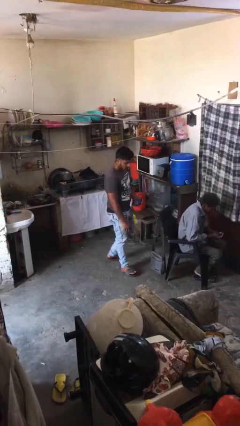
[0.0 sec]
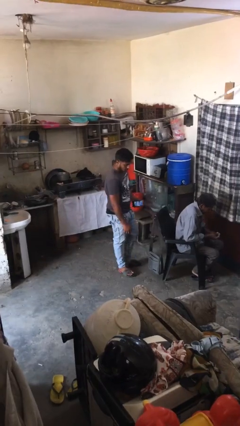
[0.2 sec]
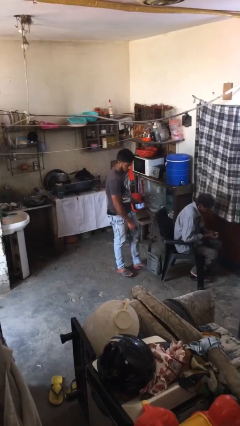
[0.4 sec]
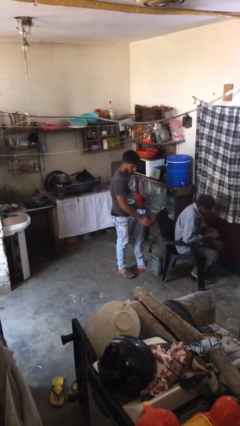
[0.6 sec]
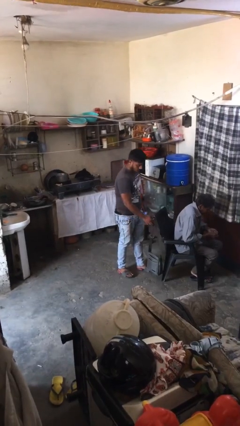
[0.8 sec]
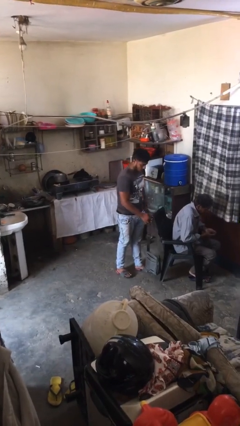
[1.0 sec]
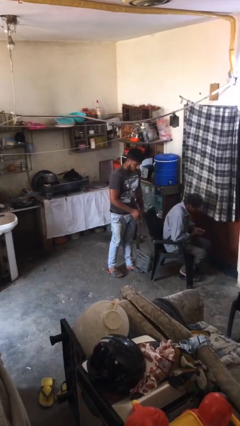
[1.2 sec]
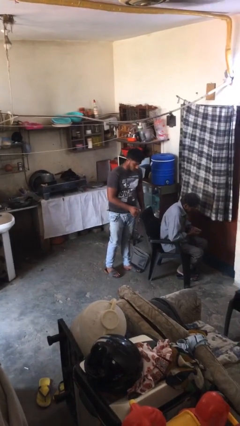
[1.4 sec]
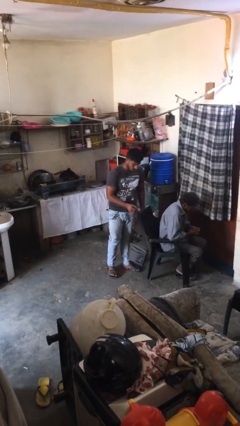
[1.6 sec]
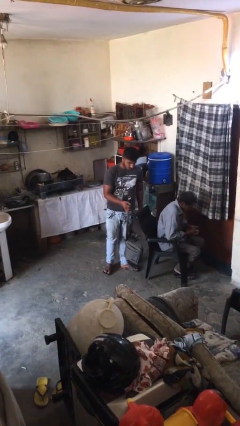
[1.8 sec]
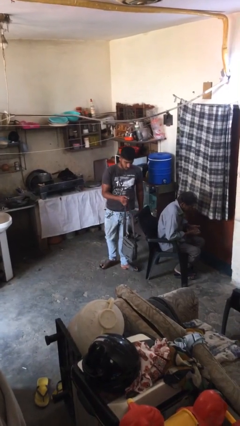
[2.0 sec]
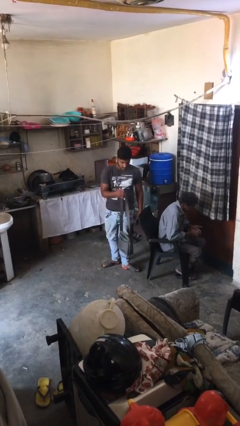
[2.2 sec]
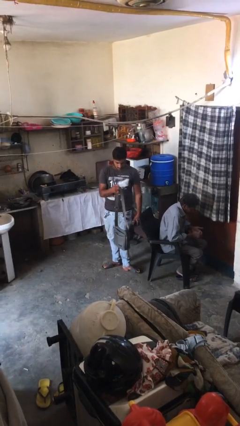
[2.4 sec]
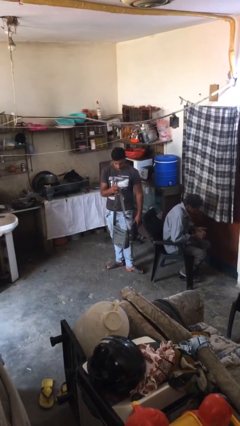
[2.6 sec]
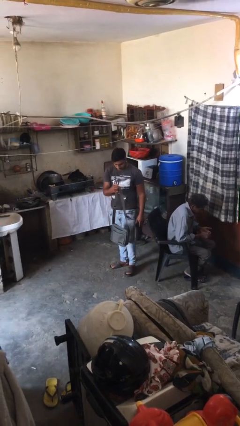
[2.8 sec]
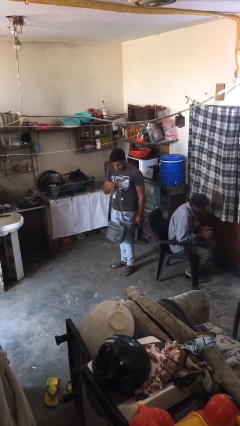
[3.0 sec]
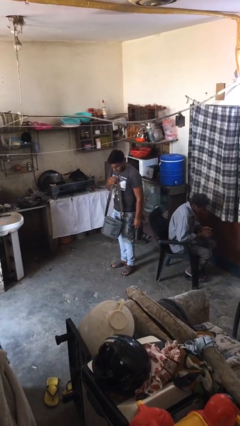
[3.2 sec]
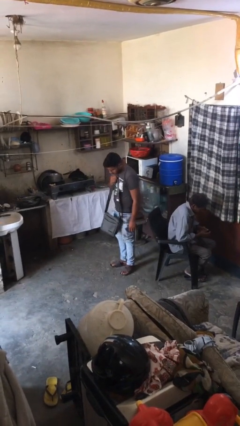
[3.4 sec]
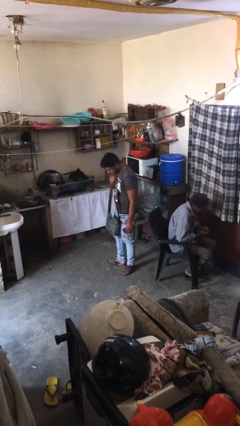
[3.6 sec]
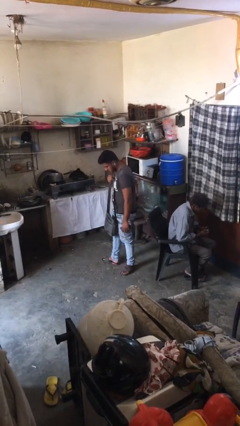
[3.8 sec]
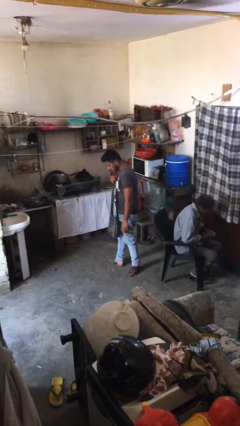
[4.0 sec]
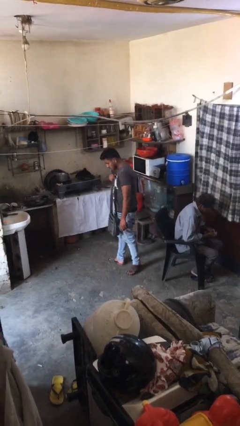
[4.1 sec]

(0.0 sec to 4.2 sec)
person steals object from person

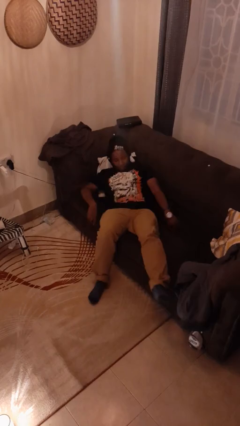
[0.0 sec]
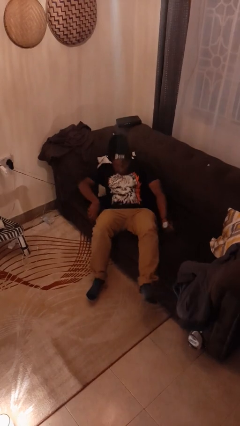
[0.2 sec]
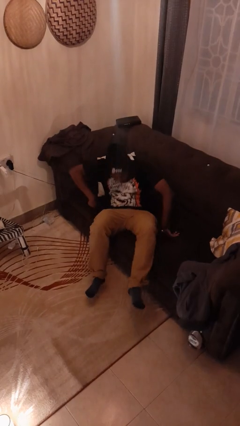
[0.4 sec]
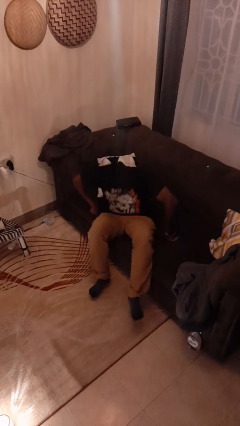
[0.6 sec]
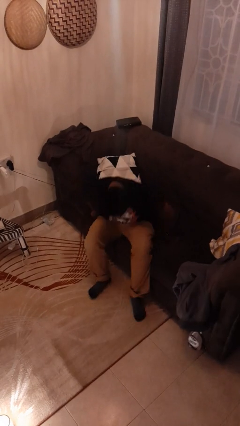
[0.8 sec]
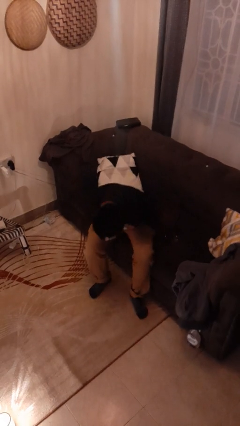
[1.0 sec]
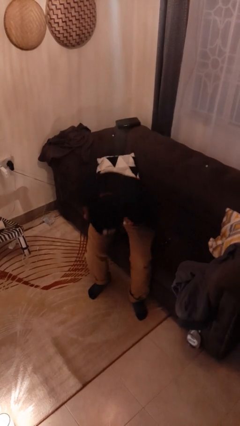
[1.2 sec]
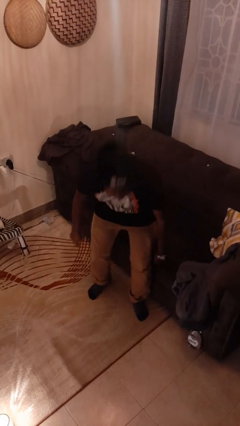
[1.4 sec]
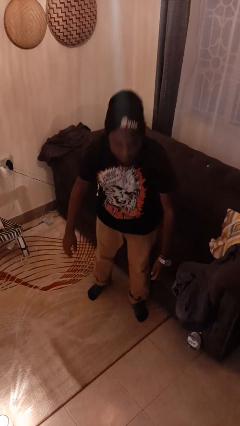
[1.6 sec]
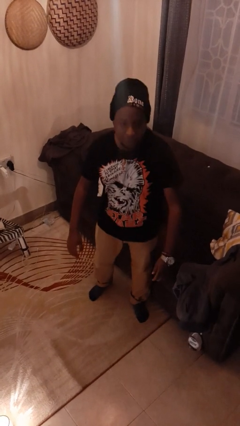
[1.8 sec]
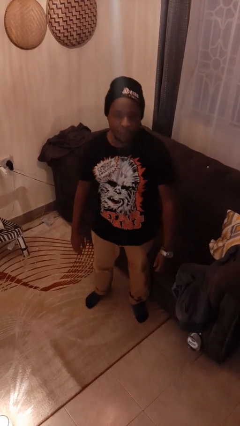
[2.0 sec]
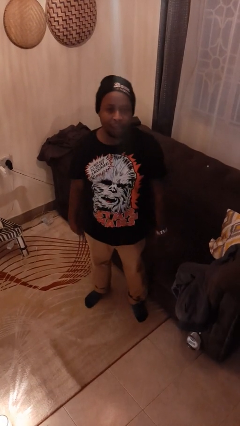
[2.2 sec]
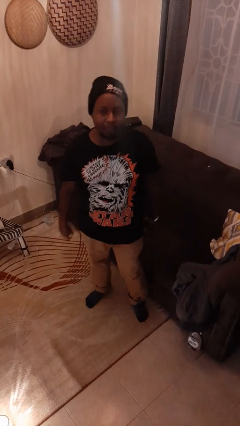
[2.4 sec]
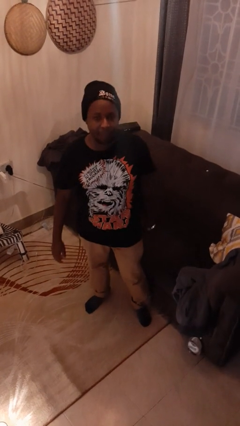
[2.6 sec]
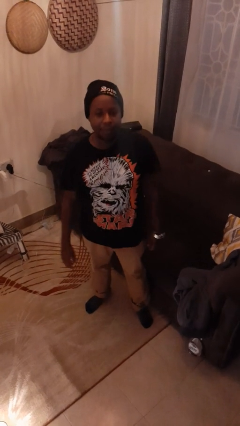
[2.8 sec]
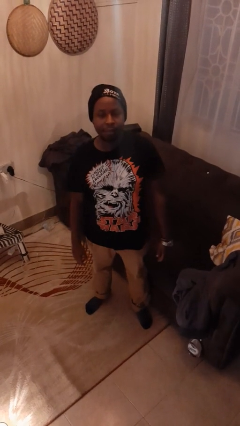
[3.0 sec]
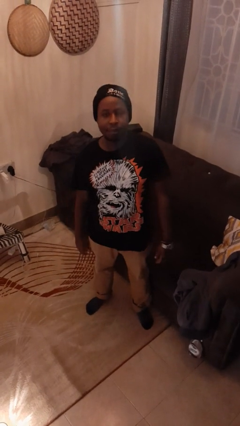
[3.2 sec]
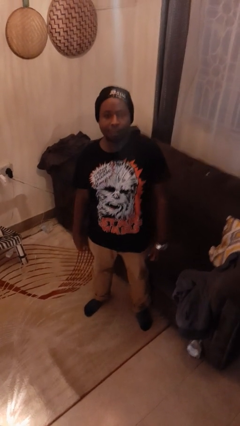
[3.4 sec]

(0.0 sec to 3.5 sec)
person stands up

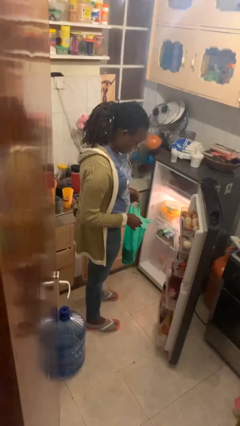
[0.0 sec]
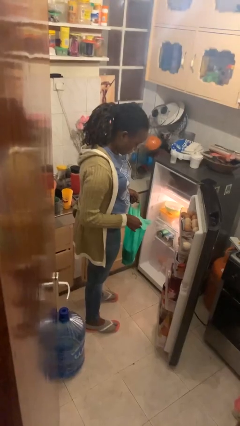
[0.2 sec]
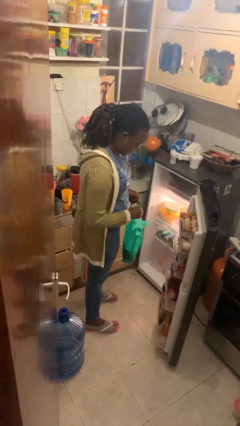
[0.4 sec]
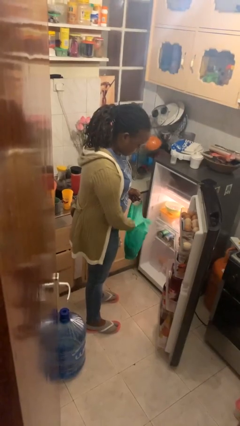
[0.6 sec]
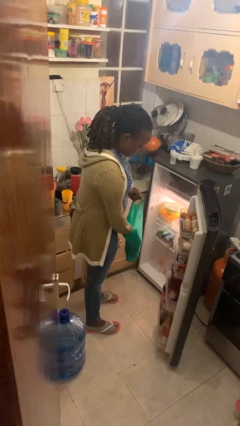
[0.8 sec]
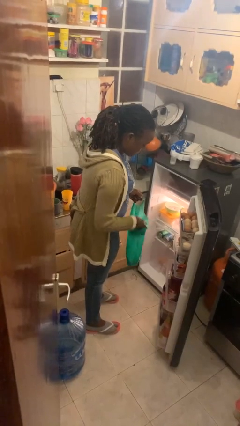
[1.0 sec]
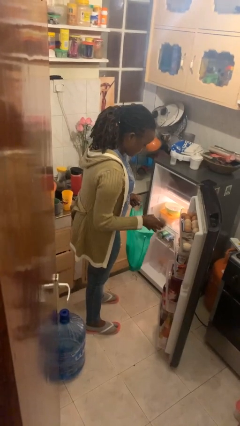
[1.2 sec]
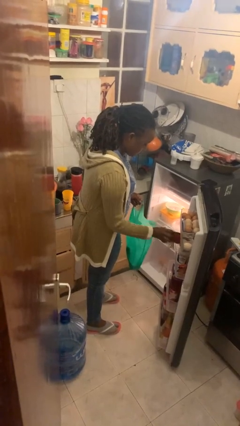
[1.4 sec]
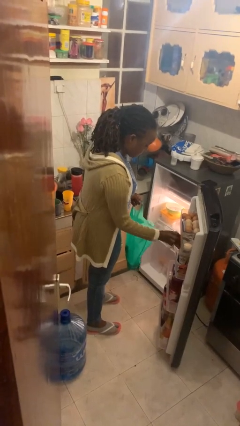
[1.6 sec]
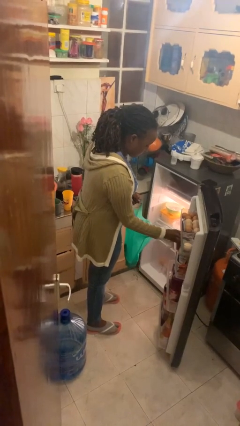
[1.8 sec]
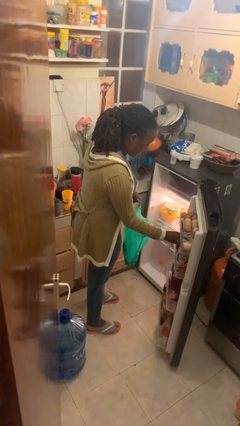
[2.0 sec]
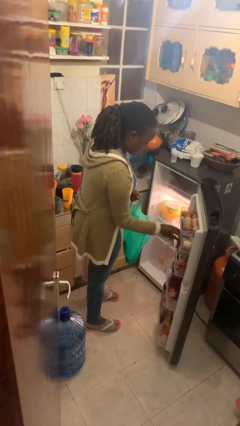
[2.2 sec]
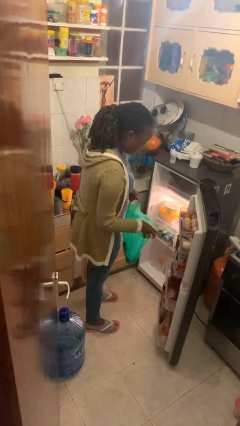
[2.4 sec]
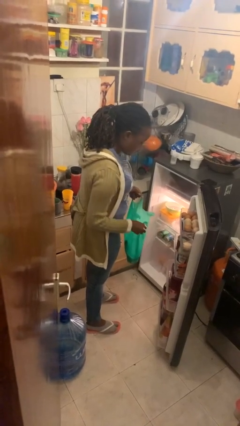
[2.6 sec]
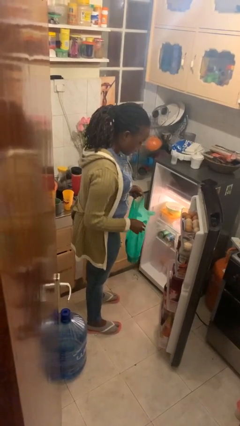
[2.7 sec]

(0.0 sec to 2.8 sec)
person loads groceries into refrigerator

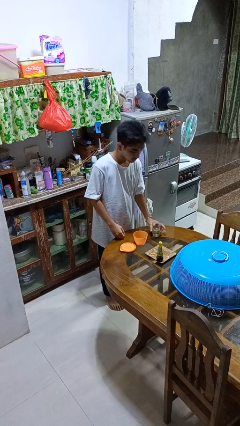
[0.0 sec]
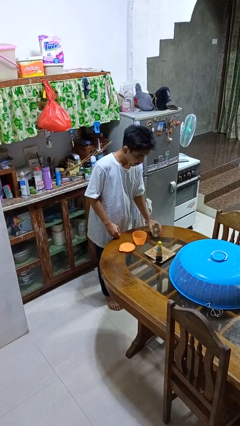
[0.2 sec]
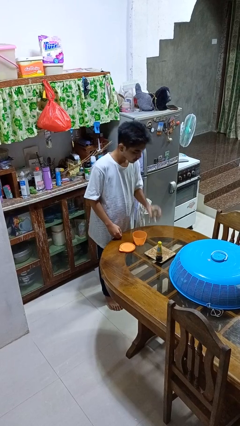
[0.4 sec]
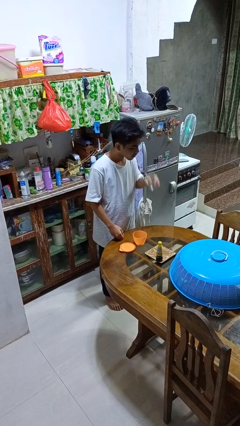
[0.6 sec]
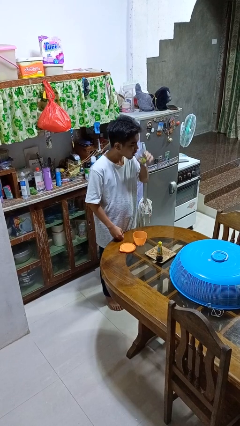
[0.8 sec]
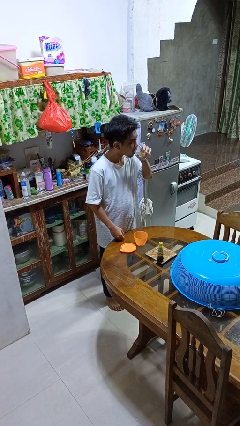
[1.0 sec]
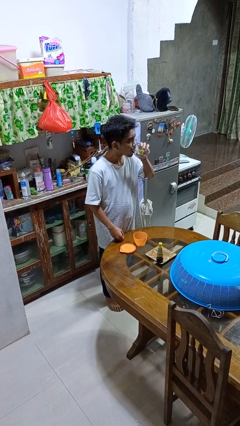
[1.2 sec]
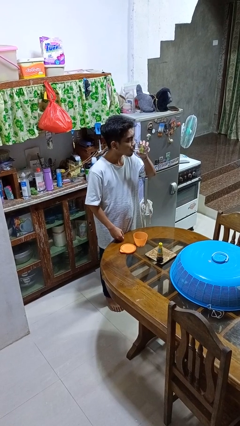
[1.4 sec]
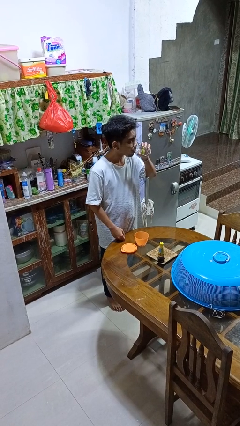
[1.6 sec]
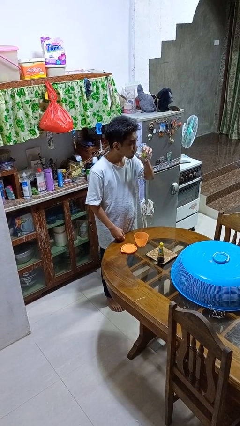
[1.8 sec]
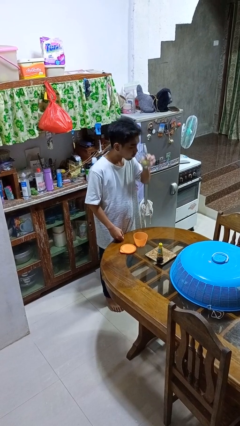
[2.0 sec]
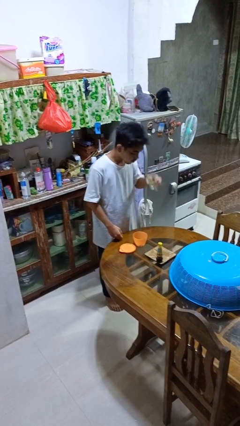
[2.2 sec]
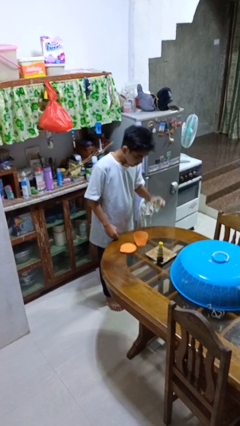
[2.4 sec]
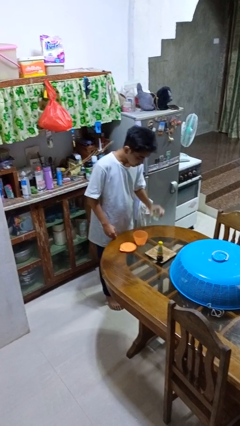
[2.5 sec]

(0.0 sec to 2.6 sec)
person drinks from cup

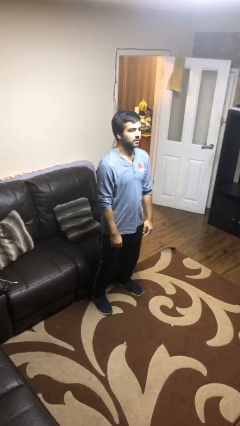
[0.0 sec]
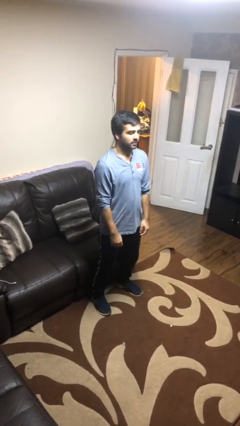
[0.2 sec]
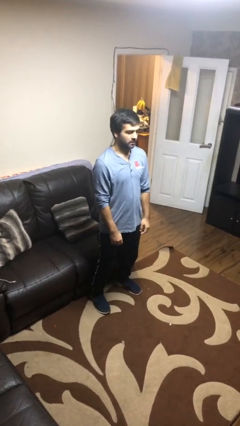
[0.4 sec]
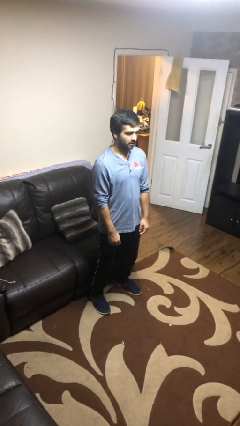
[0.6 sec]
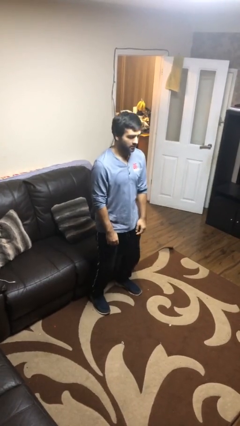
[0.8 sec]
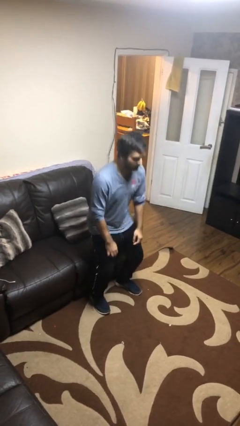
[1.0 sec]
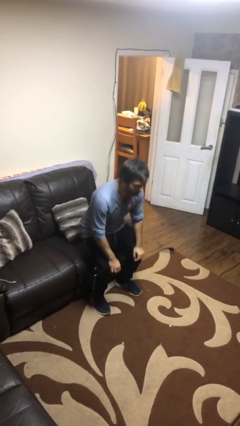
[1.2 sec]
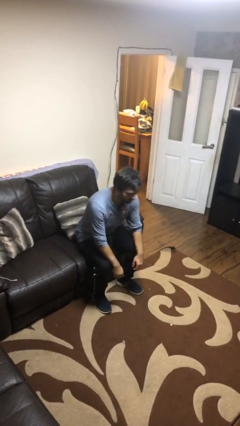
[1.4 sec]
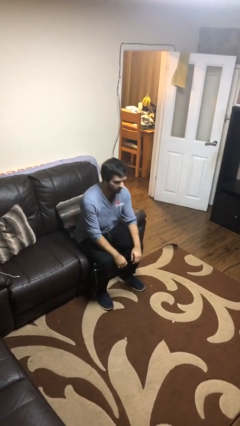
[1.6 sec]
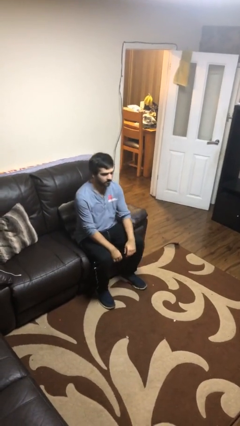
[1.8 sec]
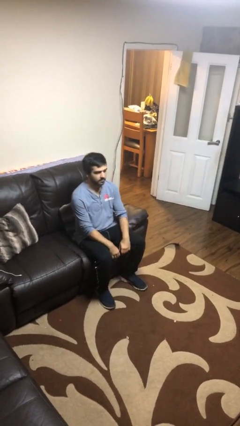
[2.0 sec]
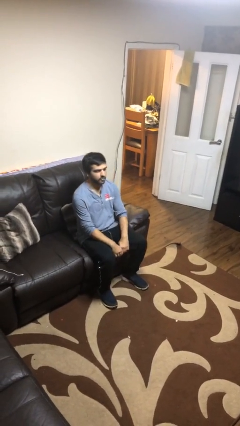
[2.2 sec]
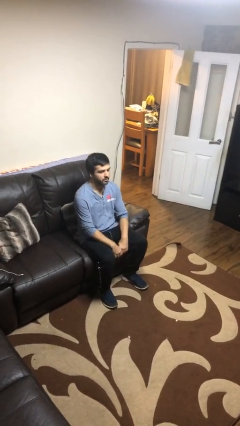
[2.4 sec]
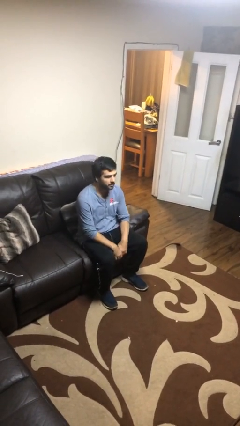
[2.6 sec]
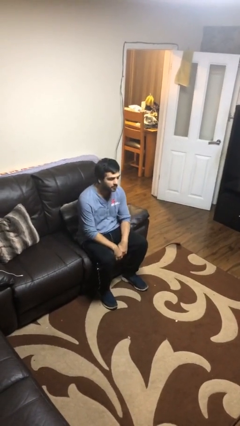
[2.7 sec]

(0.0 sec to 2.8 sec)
person sits down

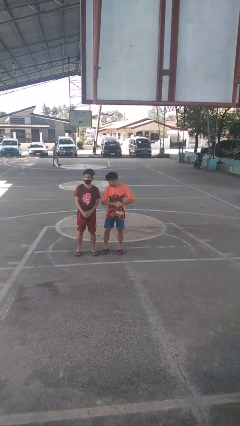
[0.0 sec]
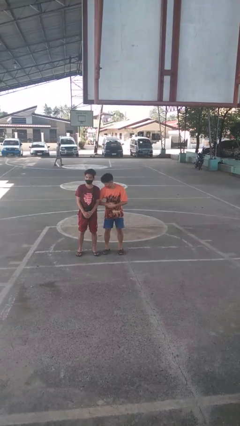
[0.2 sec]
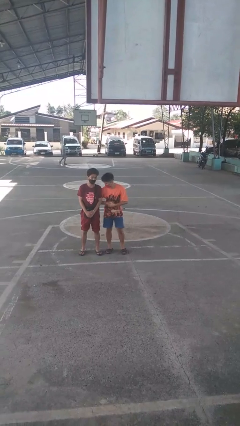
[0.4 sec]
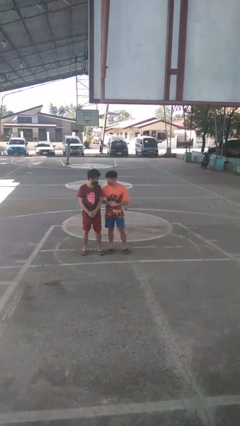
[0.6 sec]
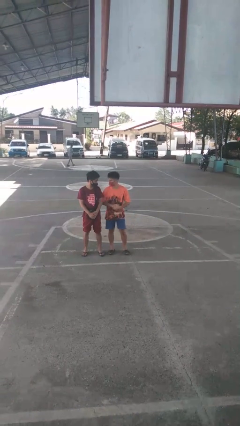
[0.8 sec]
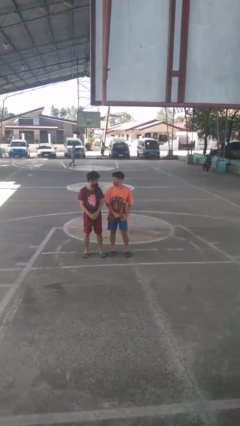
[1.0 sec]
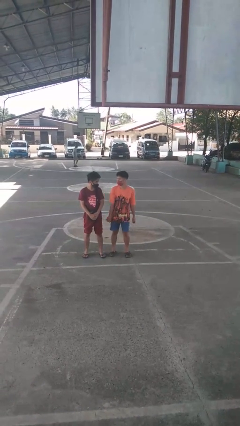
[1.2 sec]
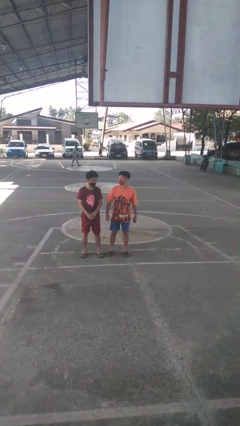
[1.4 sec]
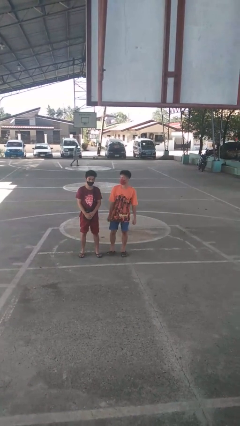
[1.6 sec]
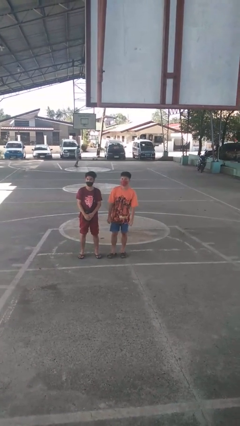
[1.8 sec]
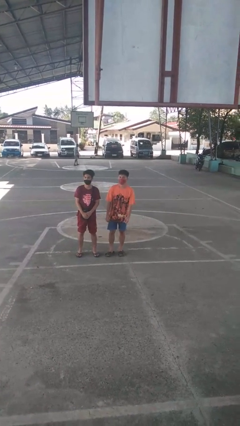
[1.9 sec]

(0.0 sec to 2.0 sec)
person nudges person with elbow
